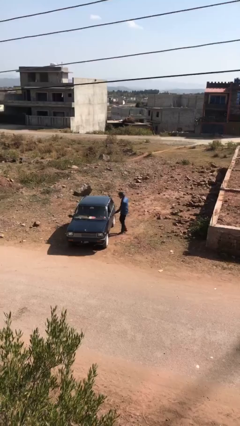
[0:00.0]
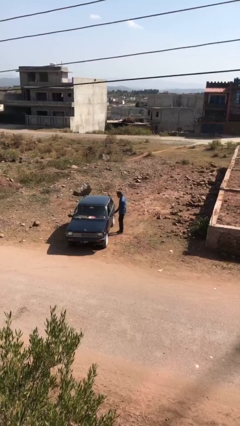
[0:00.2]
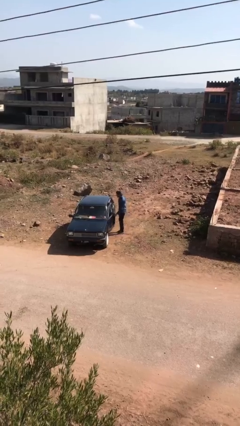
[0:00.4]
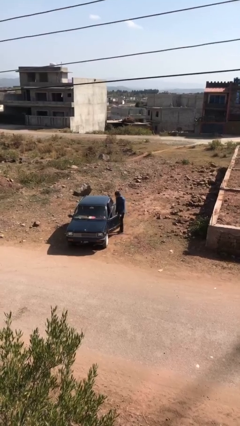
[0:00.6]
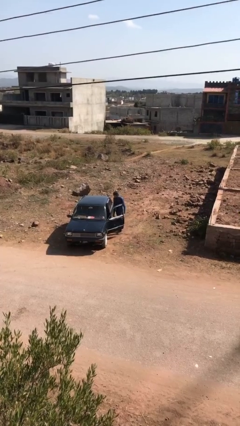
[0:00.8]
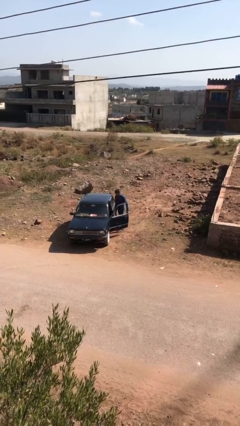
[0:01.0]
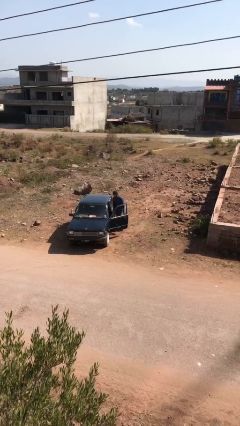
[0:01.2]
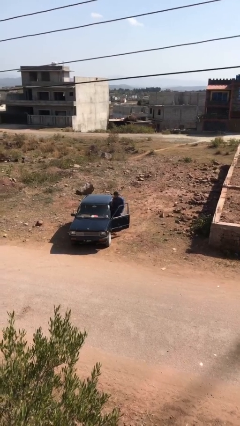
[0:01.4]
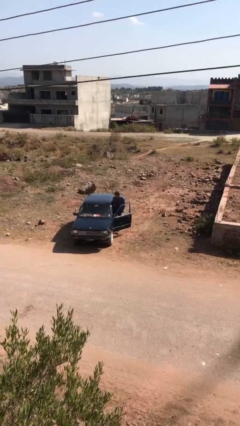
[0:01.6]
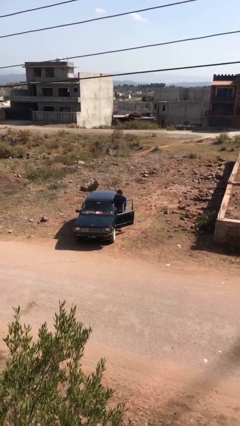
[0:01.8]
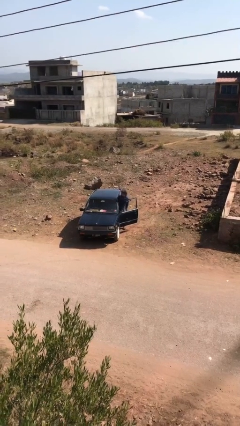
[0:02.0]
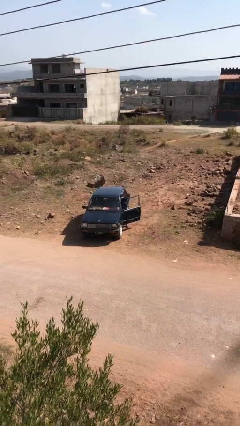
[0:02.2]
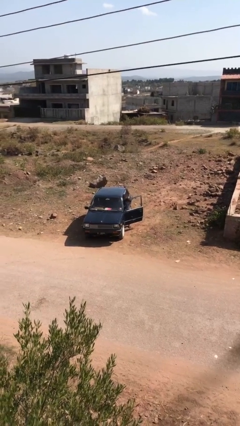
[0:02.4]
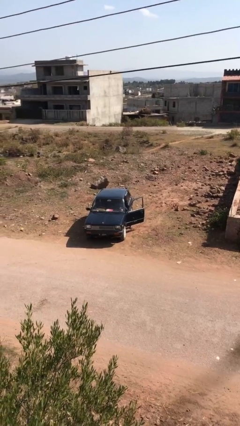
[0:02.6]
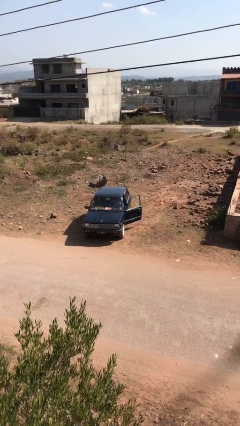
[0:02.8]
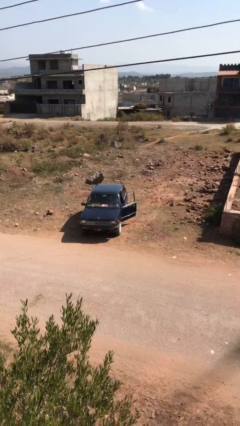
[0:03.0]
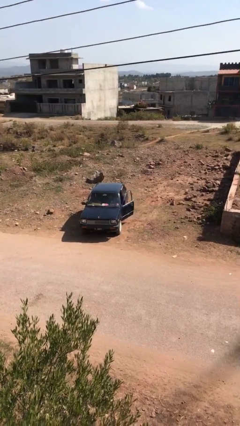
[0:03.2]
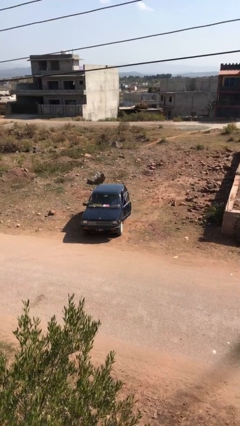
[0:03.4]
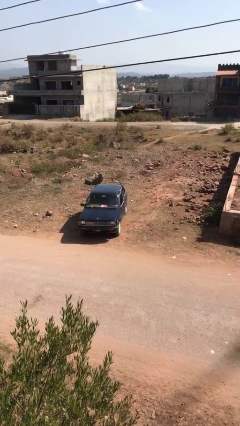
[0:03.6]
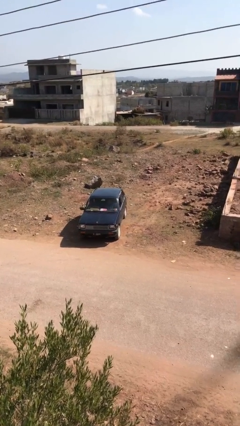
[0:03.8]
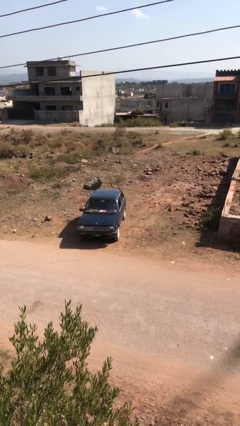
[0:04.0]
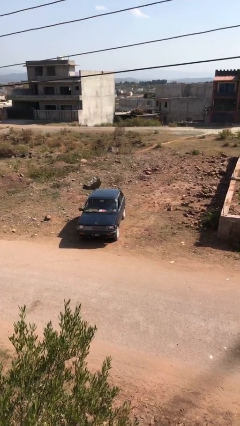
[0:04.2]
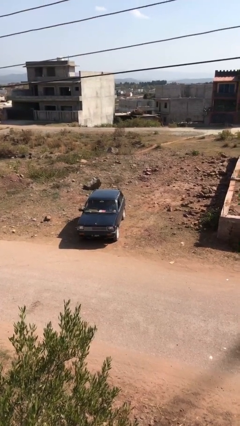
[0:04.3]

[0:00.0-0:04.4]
car picks up person

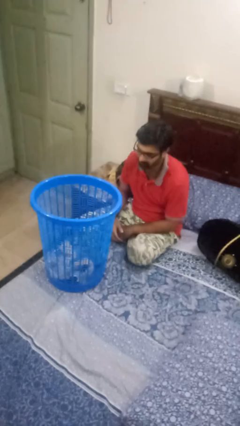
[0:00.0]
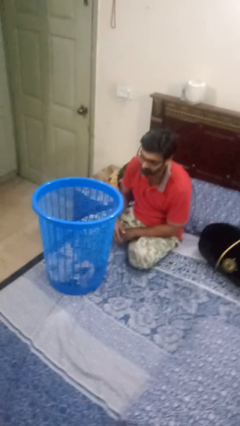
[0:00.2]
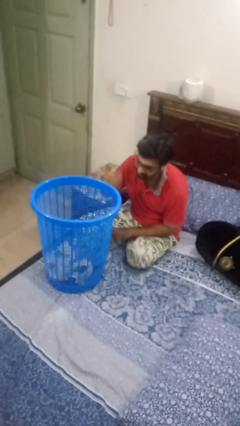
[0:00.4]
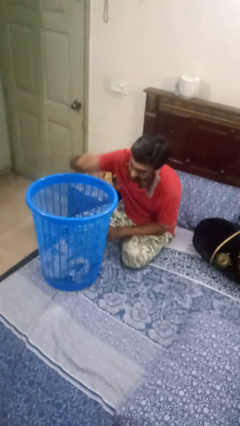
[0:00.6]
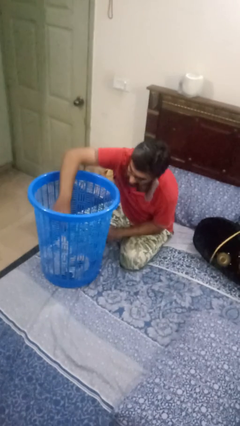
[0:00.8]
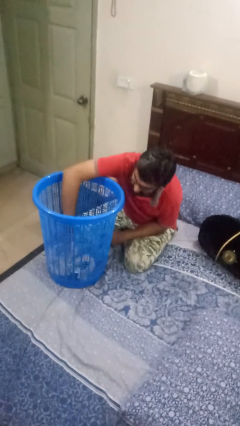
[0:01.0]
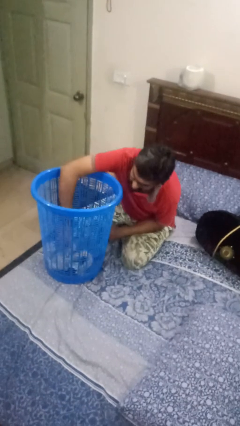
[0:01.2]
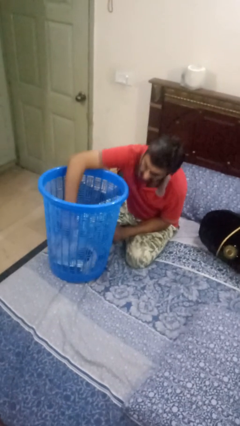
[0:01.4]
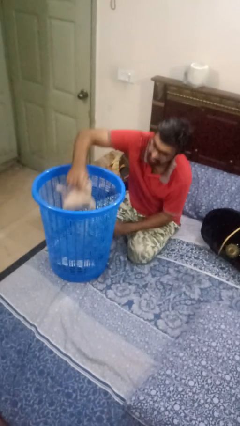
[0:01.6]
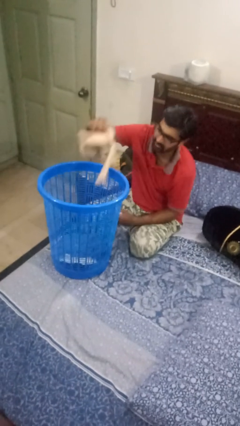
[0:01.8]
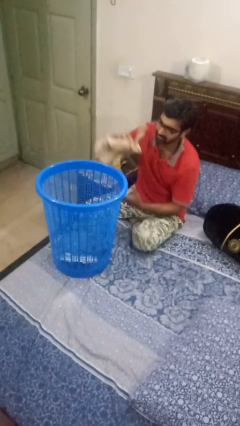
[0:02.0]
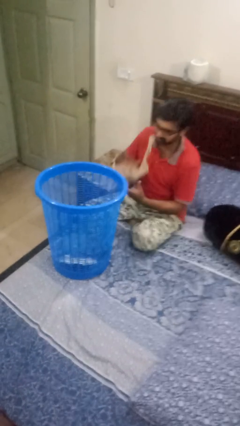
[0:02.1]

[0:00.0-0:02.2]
person takes object from basket

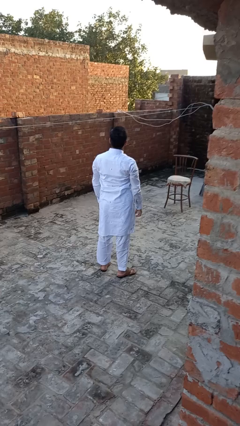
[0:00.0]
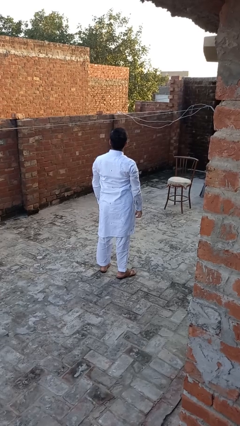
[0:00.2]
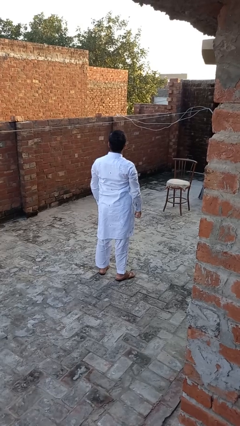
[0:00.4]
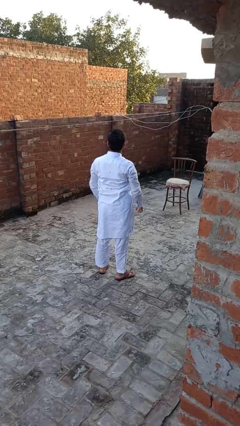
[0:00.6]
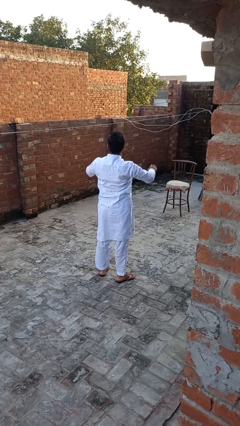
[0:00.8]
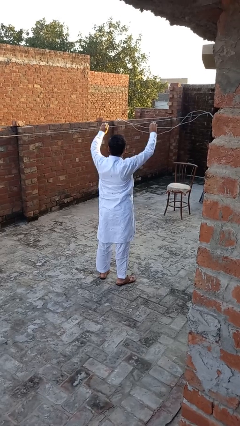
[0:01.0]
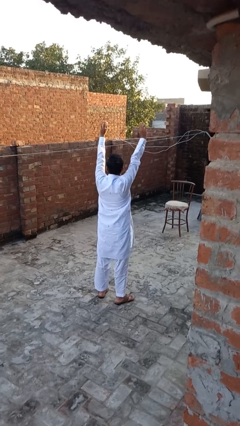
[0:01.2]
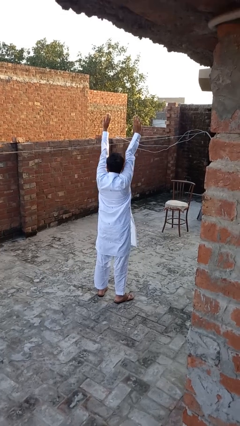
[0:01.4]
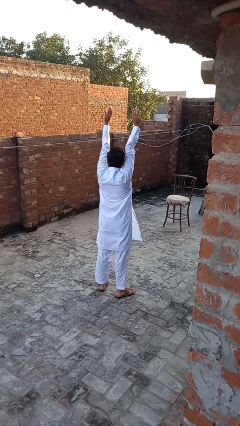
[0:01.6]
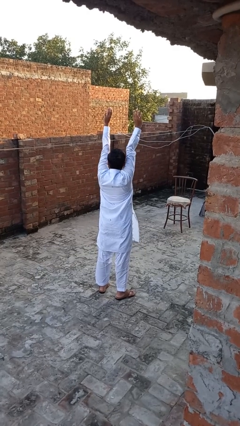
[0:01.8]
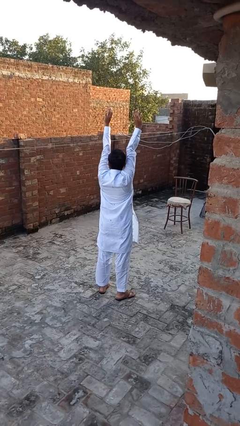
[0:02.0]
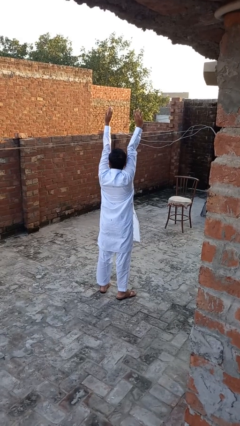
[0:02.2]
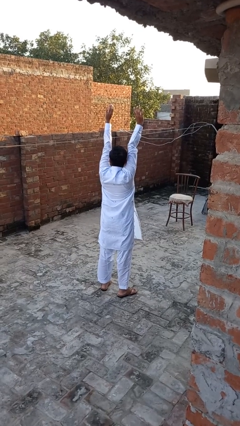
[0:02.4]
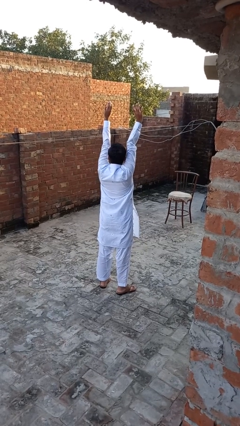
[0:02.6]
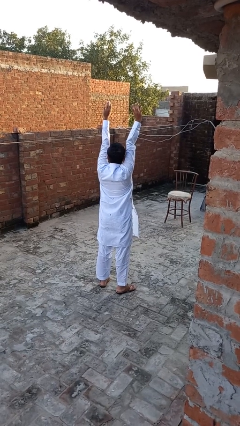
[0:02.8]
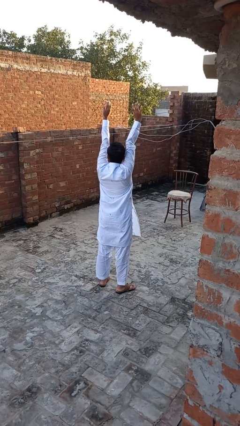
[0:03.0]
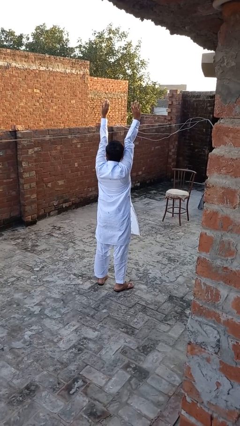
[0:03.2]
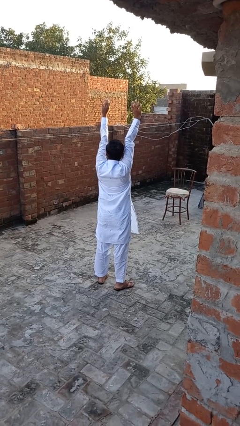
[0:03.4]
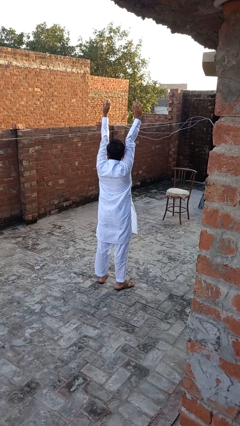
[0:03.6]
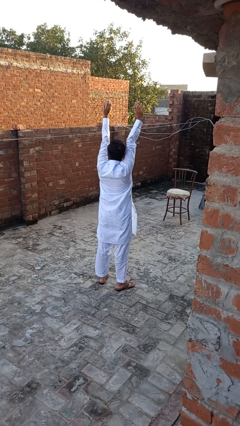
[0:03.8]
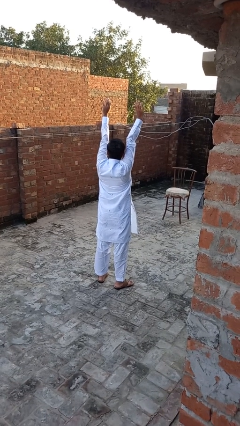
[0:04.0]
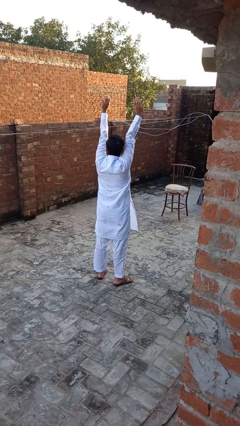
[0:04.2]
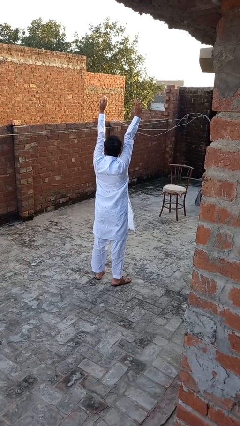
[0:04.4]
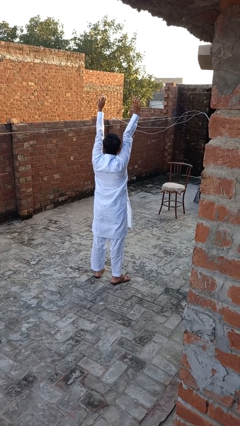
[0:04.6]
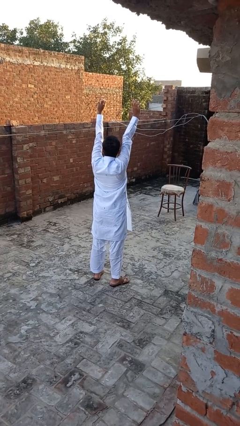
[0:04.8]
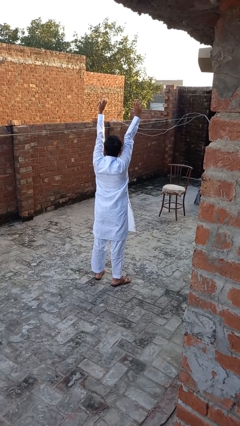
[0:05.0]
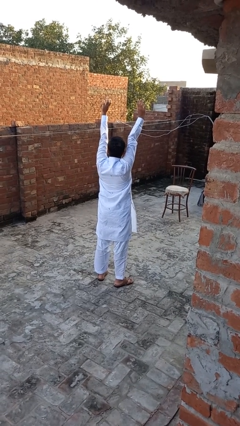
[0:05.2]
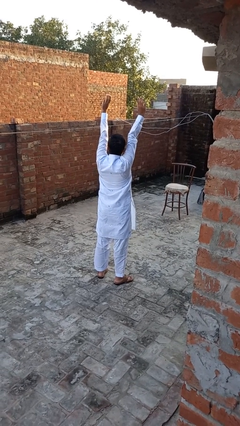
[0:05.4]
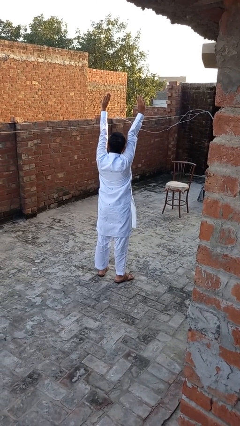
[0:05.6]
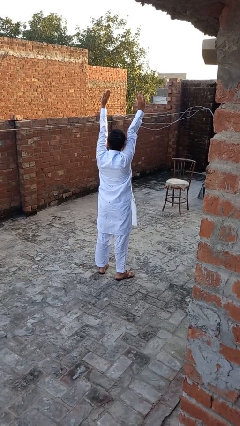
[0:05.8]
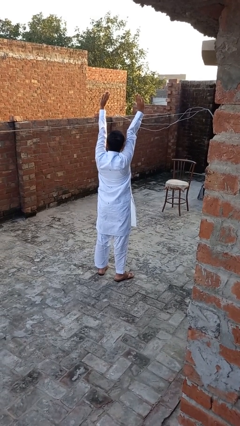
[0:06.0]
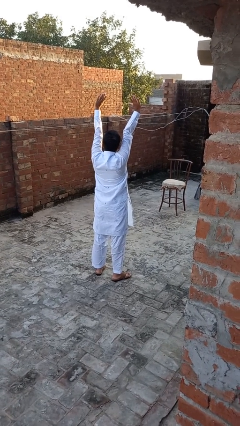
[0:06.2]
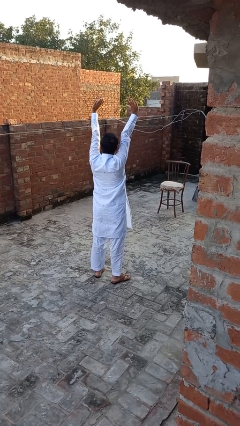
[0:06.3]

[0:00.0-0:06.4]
person gestures swipe up

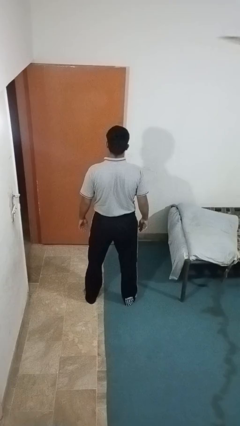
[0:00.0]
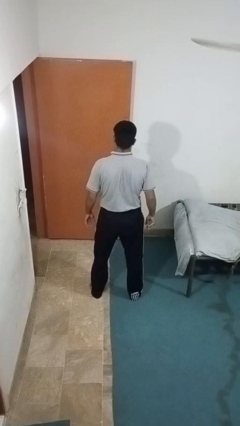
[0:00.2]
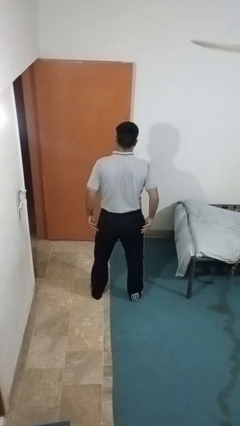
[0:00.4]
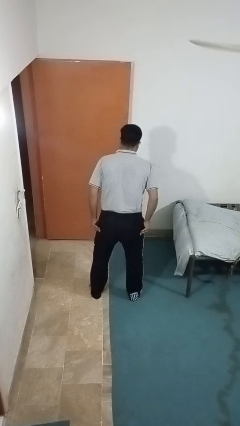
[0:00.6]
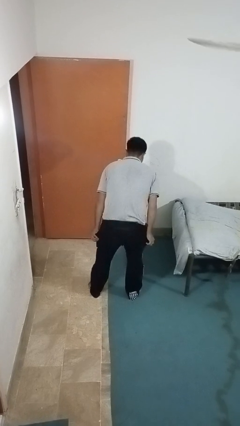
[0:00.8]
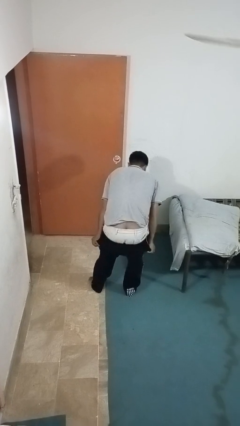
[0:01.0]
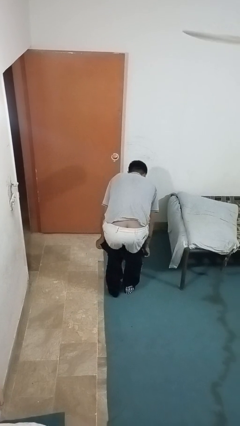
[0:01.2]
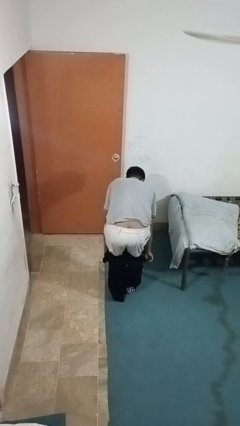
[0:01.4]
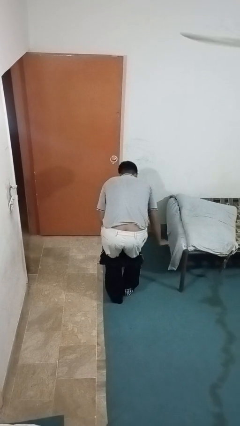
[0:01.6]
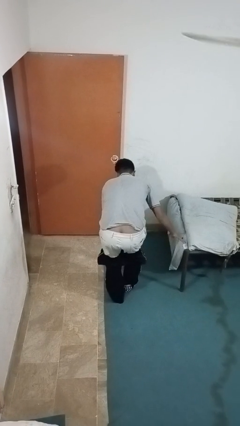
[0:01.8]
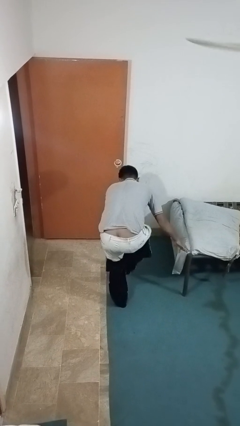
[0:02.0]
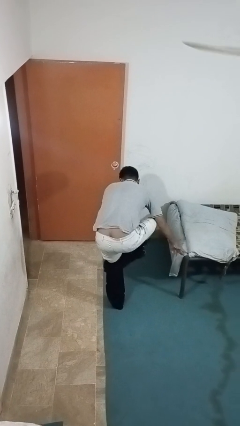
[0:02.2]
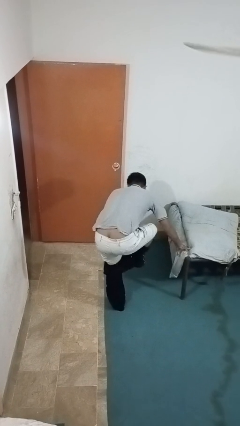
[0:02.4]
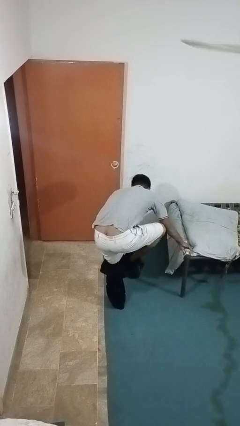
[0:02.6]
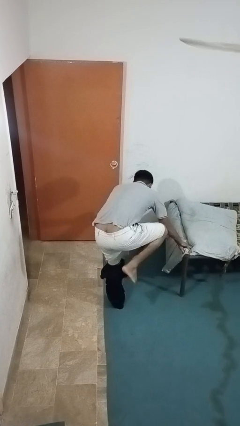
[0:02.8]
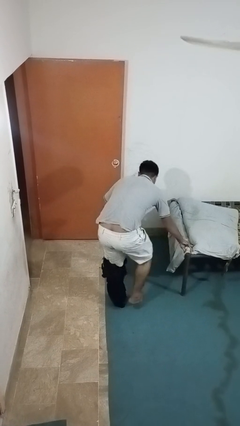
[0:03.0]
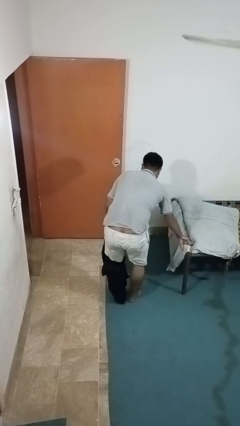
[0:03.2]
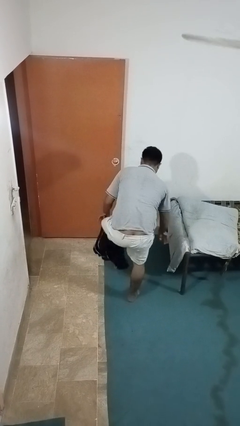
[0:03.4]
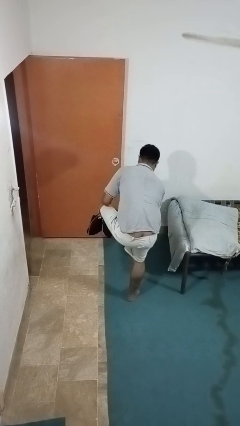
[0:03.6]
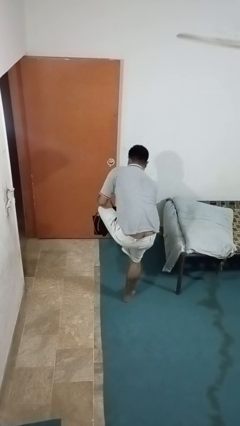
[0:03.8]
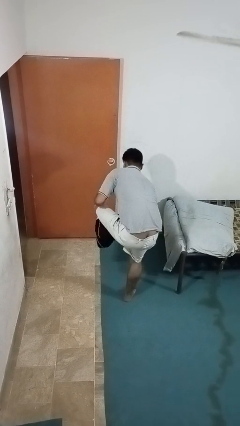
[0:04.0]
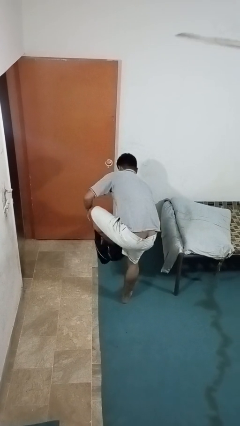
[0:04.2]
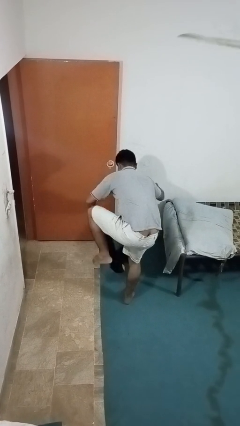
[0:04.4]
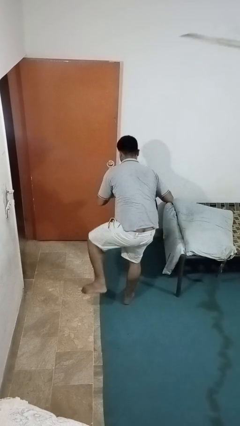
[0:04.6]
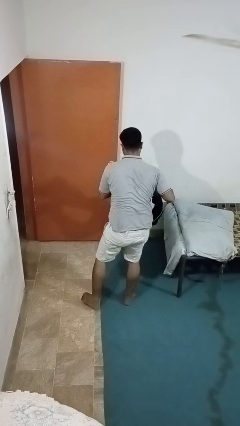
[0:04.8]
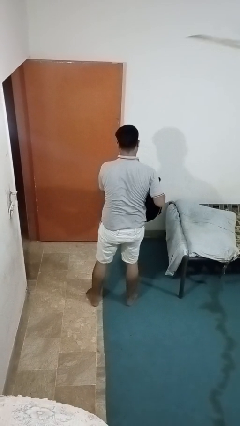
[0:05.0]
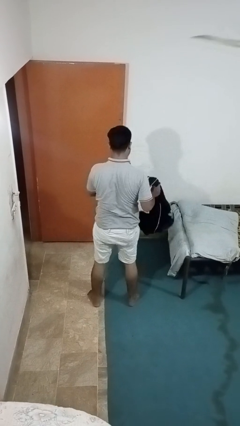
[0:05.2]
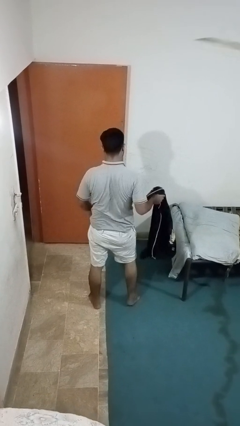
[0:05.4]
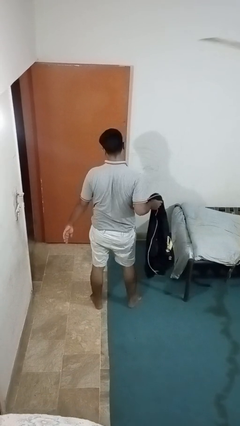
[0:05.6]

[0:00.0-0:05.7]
person takes off pants
